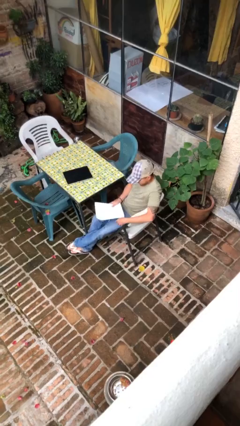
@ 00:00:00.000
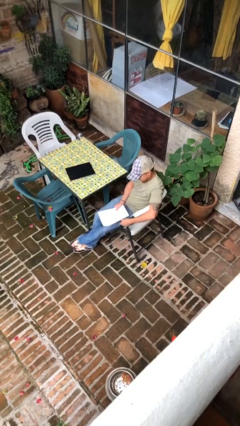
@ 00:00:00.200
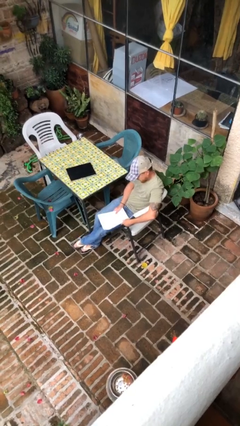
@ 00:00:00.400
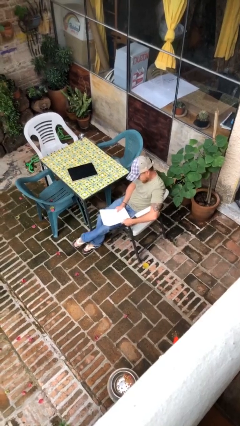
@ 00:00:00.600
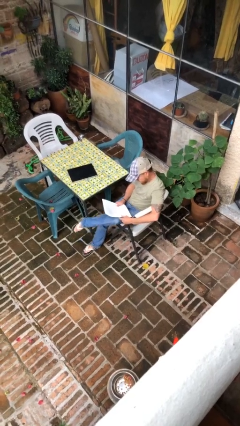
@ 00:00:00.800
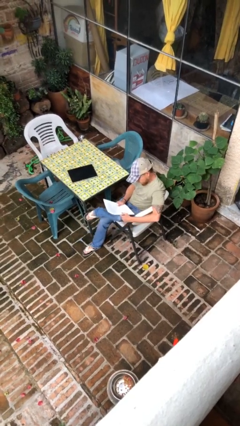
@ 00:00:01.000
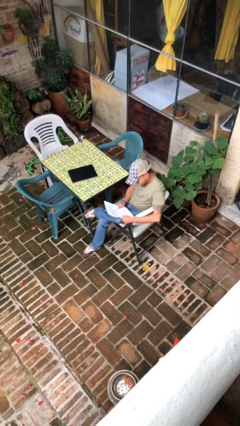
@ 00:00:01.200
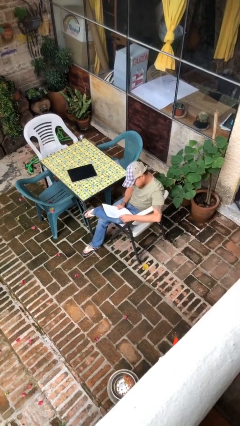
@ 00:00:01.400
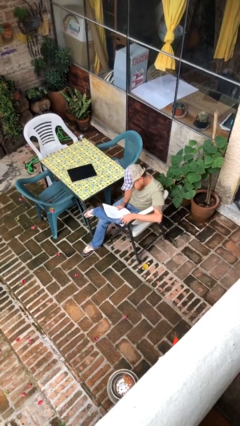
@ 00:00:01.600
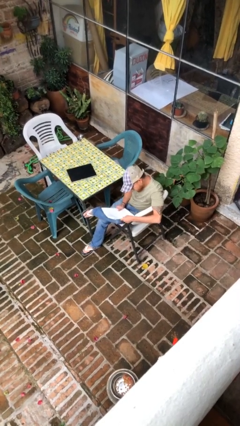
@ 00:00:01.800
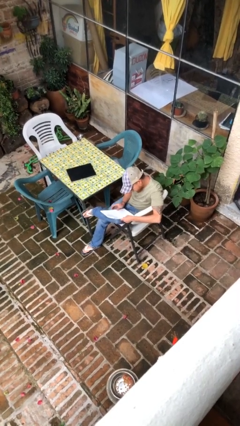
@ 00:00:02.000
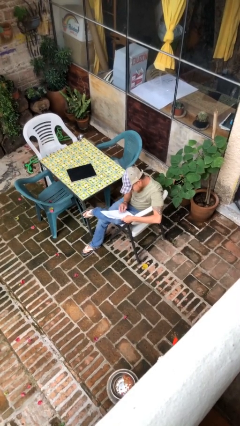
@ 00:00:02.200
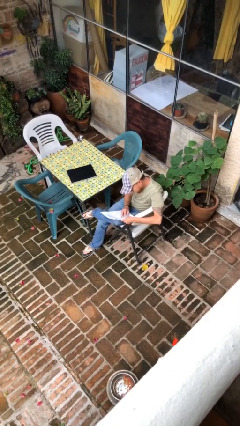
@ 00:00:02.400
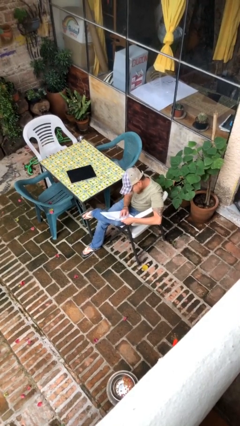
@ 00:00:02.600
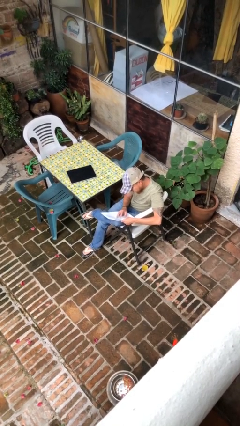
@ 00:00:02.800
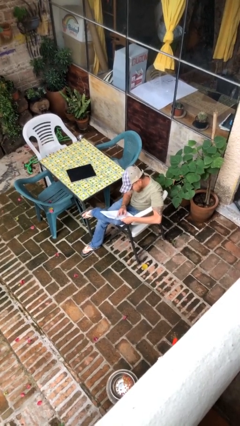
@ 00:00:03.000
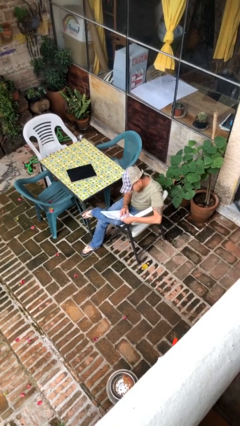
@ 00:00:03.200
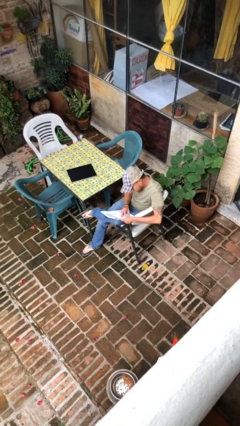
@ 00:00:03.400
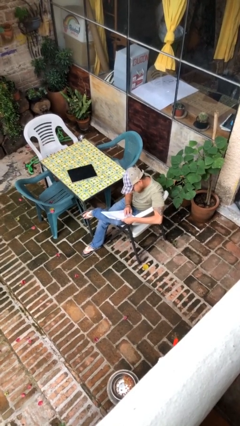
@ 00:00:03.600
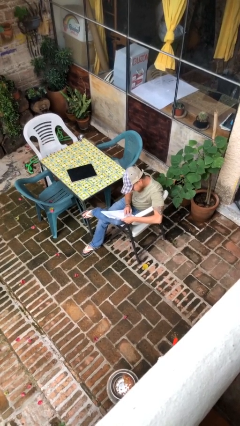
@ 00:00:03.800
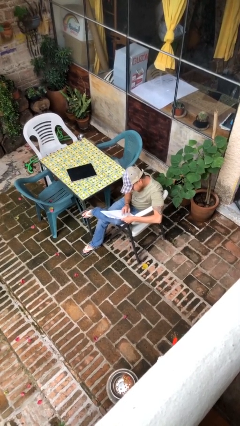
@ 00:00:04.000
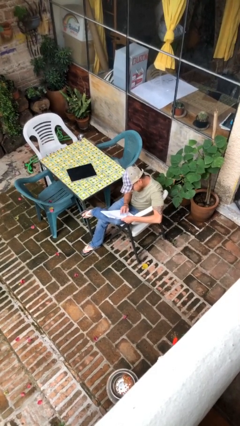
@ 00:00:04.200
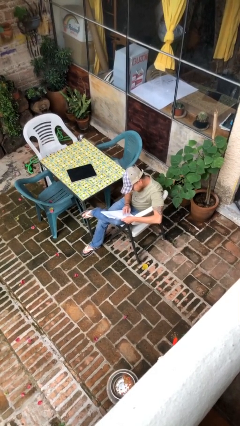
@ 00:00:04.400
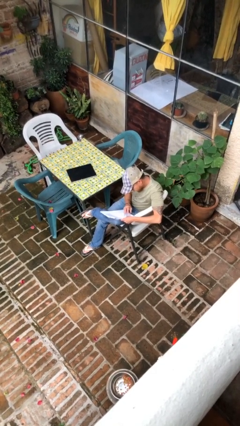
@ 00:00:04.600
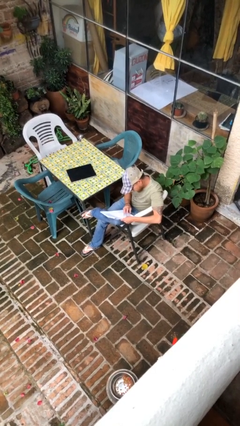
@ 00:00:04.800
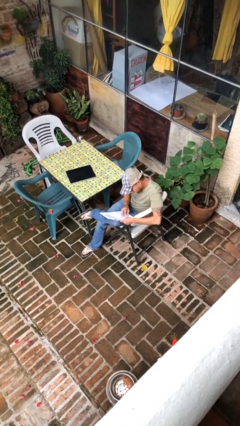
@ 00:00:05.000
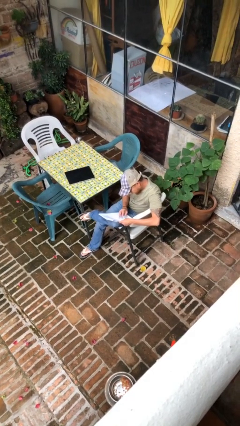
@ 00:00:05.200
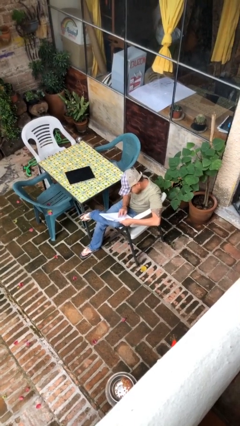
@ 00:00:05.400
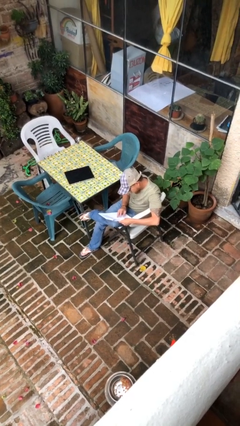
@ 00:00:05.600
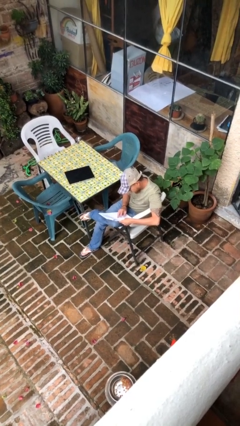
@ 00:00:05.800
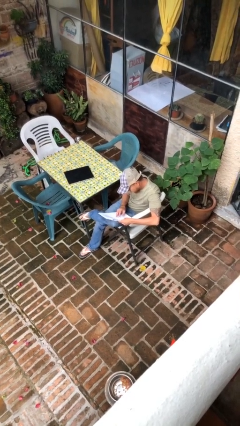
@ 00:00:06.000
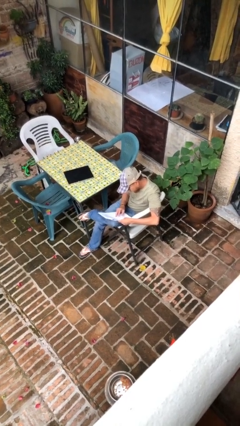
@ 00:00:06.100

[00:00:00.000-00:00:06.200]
person reads document

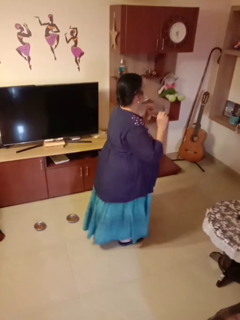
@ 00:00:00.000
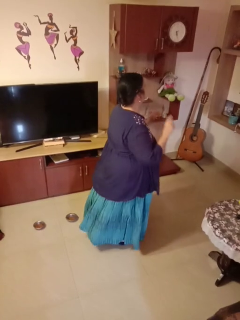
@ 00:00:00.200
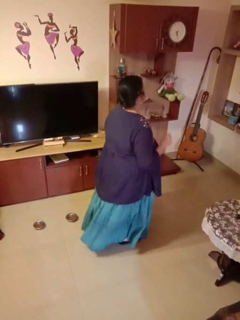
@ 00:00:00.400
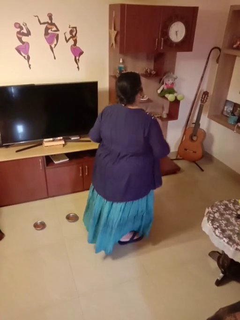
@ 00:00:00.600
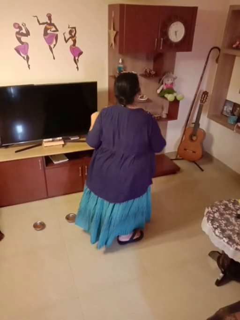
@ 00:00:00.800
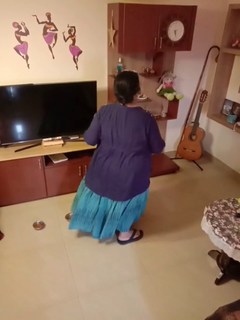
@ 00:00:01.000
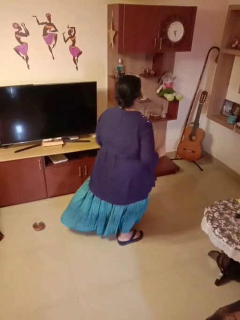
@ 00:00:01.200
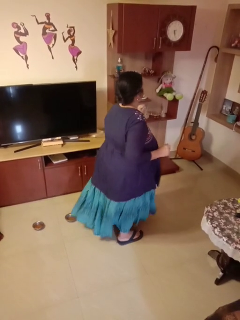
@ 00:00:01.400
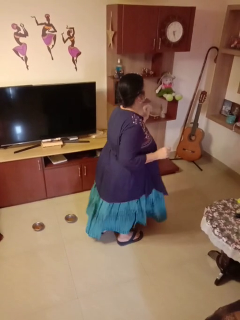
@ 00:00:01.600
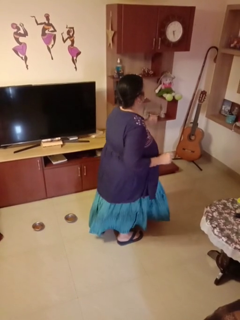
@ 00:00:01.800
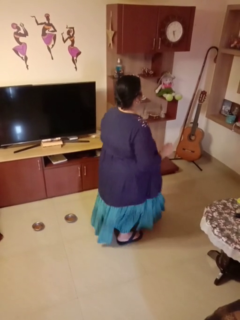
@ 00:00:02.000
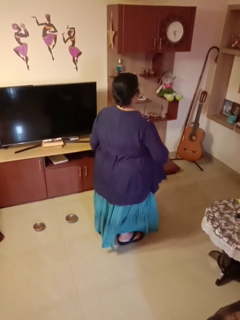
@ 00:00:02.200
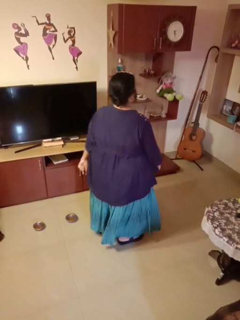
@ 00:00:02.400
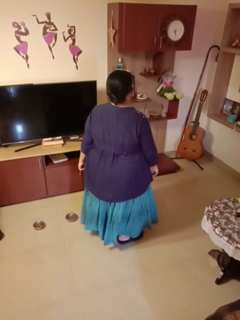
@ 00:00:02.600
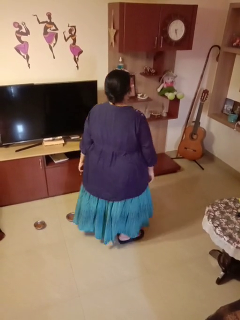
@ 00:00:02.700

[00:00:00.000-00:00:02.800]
person dances in place

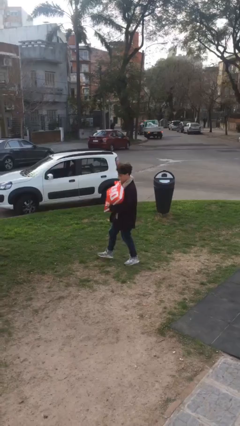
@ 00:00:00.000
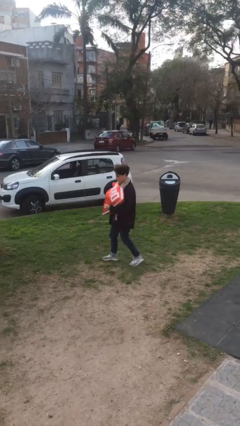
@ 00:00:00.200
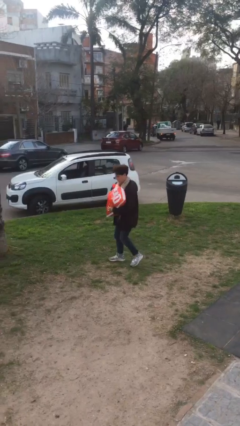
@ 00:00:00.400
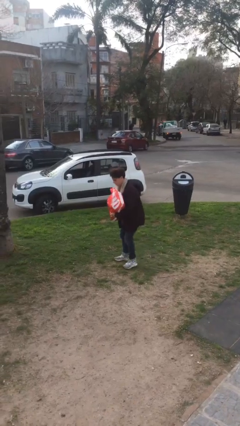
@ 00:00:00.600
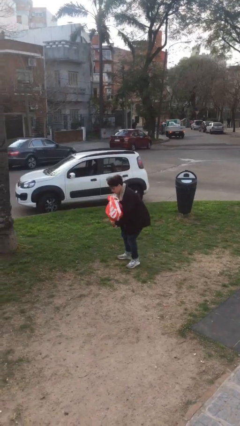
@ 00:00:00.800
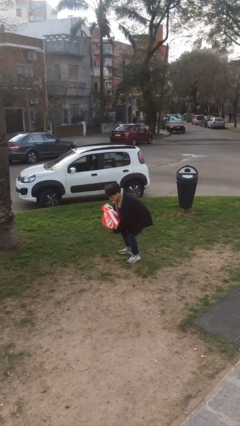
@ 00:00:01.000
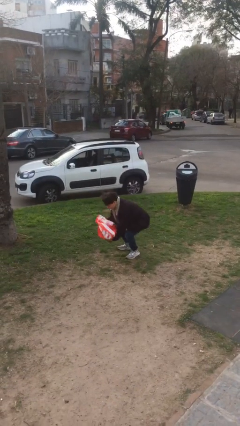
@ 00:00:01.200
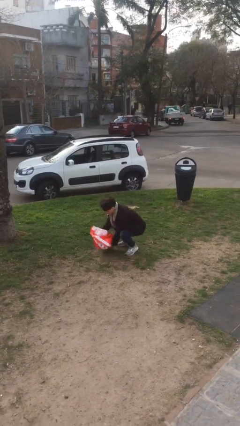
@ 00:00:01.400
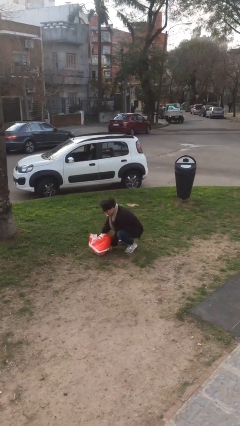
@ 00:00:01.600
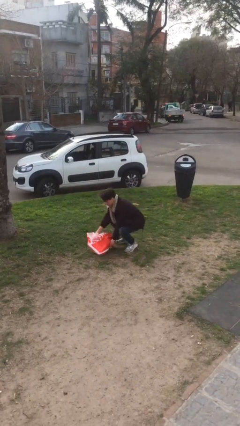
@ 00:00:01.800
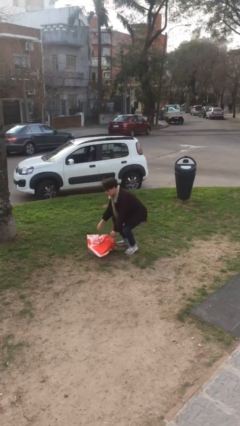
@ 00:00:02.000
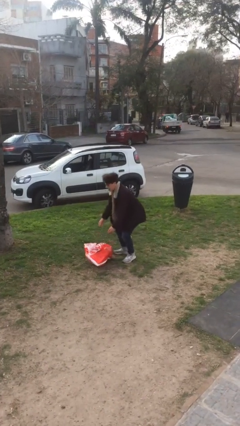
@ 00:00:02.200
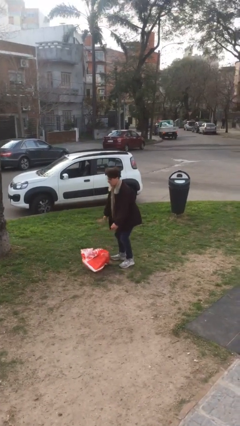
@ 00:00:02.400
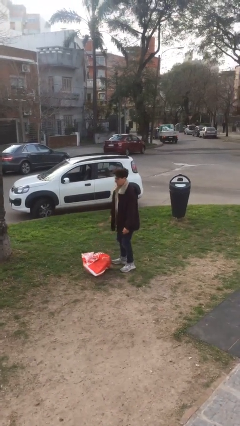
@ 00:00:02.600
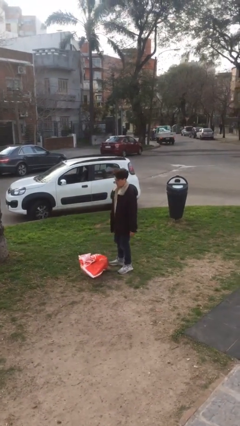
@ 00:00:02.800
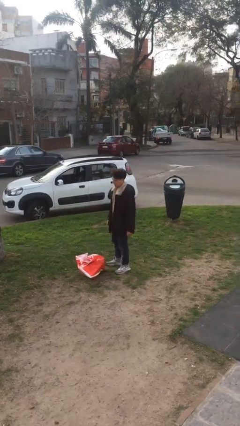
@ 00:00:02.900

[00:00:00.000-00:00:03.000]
person puts down object on floor

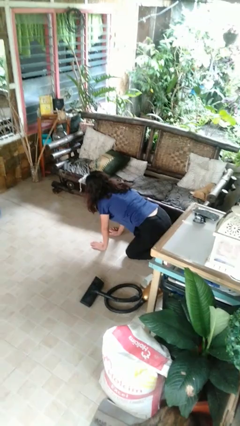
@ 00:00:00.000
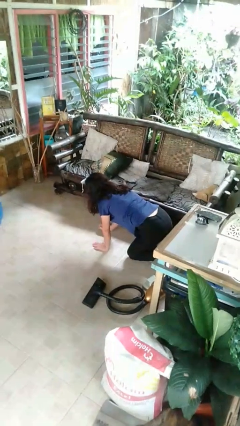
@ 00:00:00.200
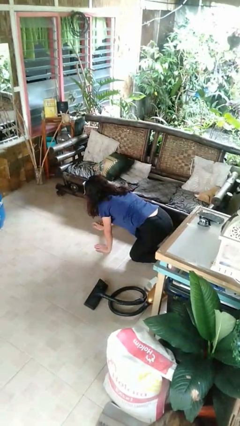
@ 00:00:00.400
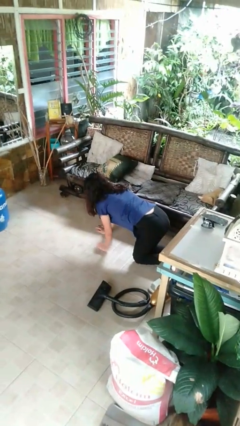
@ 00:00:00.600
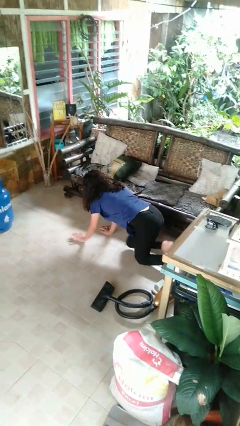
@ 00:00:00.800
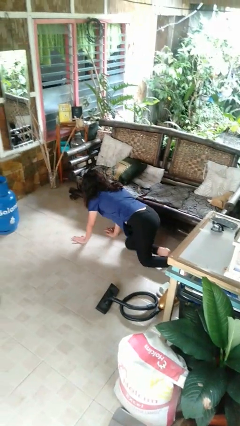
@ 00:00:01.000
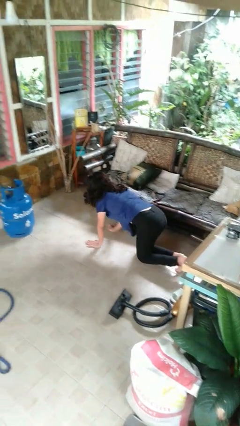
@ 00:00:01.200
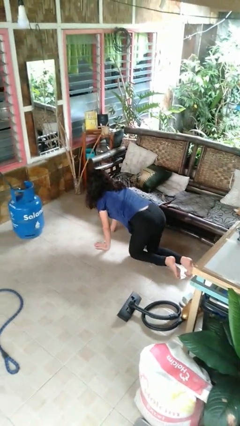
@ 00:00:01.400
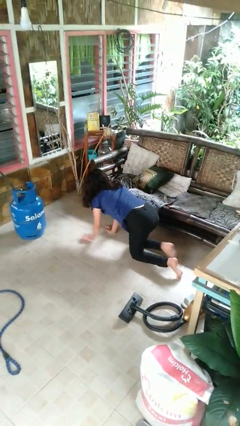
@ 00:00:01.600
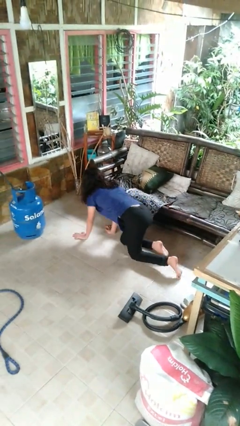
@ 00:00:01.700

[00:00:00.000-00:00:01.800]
person crawls

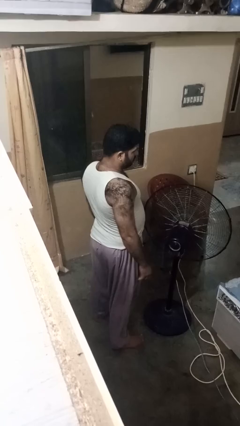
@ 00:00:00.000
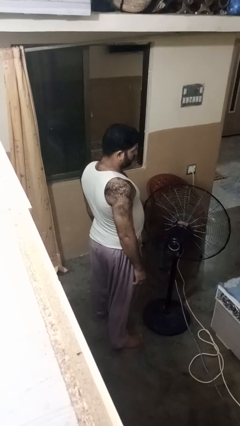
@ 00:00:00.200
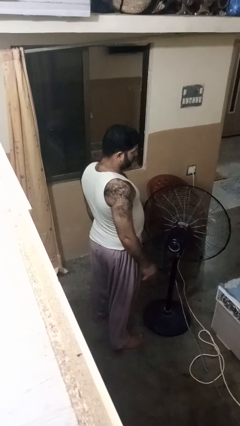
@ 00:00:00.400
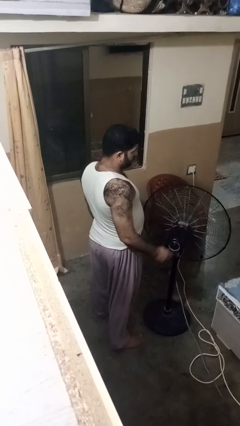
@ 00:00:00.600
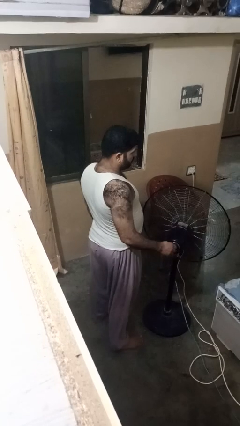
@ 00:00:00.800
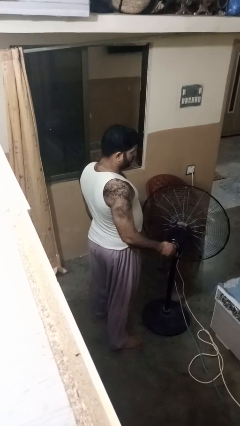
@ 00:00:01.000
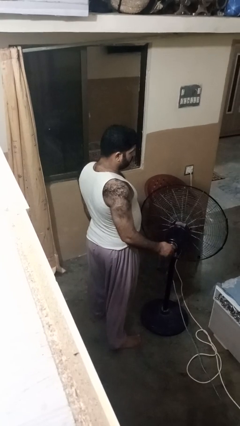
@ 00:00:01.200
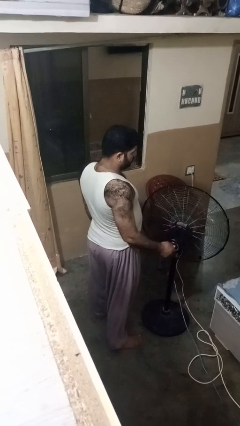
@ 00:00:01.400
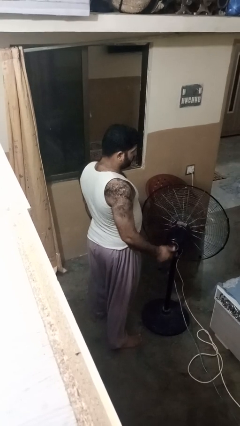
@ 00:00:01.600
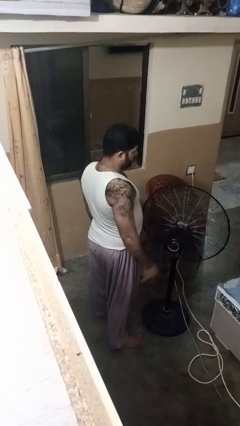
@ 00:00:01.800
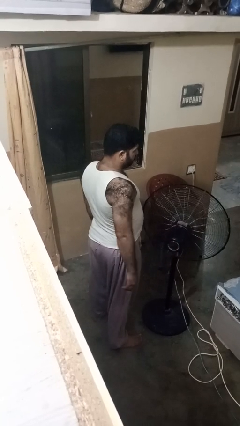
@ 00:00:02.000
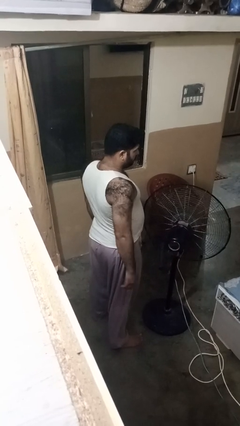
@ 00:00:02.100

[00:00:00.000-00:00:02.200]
person turns off fan

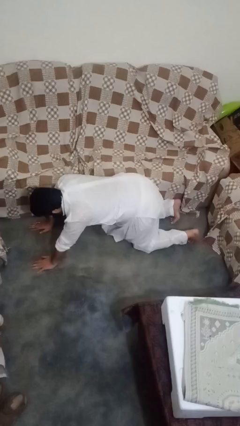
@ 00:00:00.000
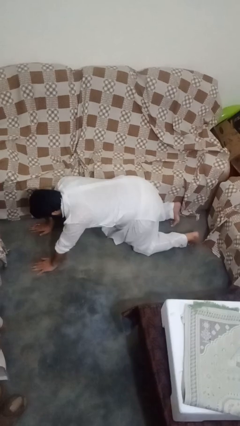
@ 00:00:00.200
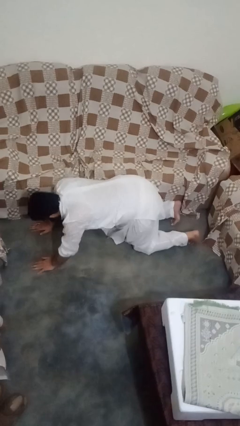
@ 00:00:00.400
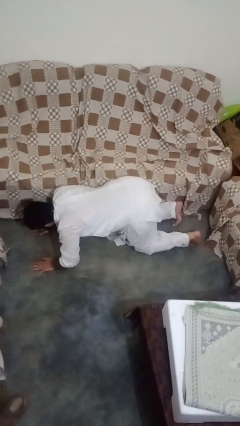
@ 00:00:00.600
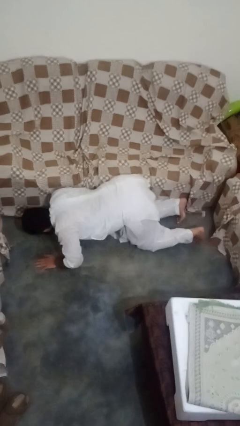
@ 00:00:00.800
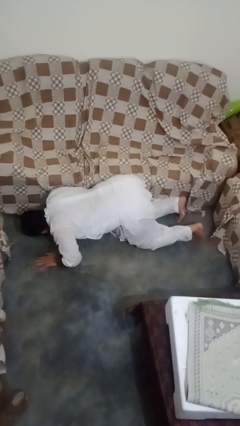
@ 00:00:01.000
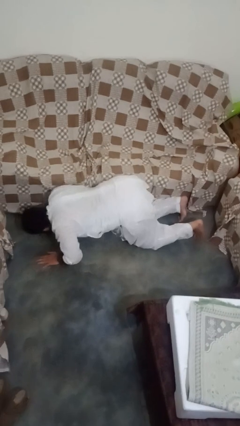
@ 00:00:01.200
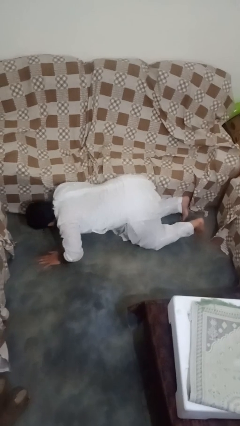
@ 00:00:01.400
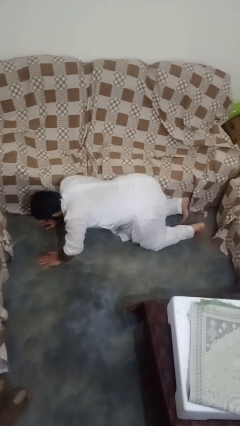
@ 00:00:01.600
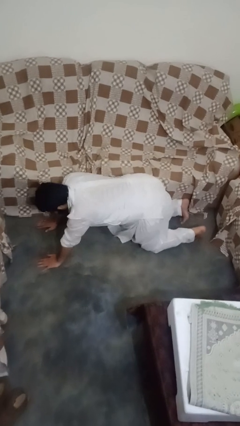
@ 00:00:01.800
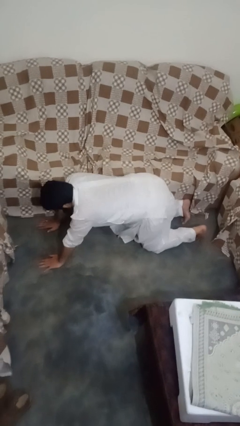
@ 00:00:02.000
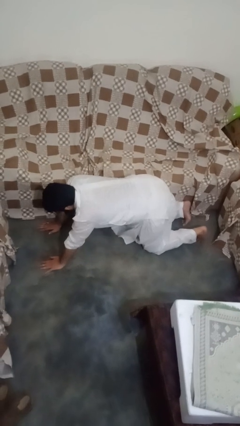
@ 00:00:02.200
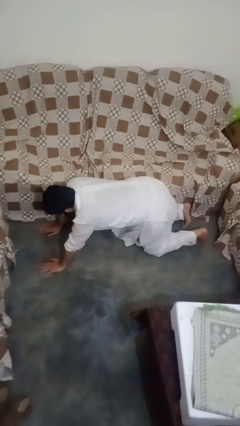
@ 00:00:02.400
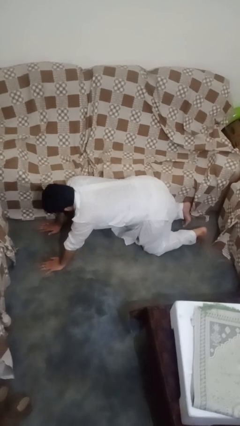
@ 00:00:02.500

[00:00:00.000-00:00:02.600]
person exercises with pushup
